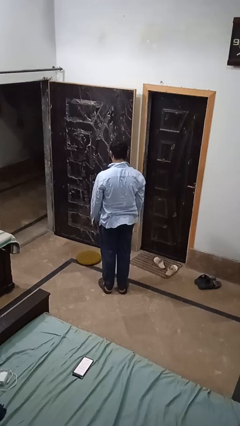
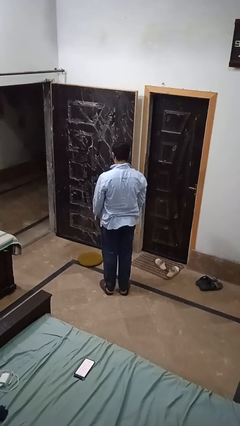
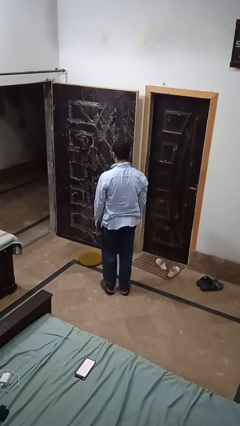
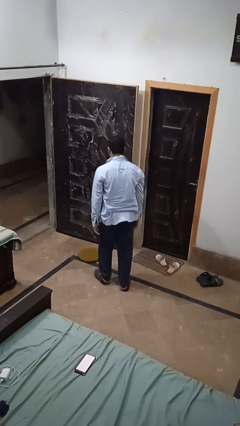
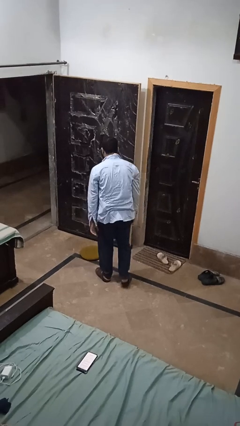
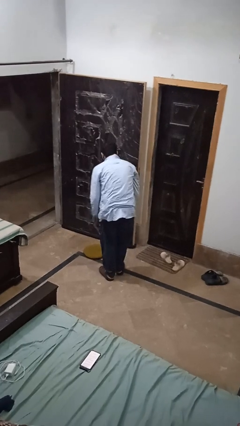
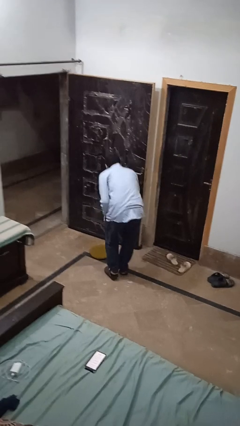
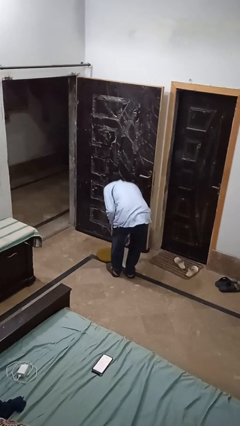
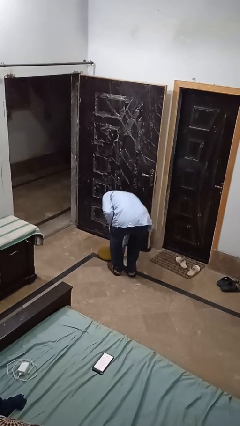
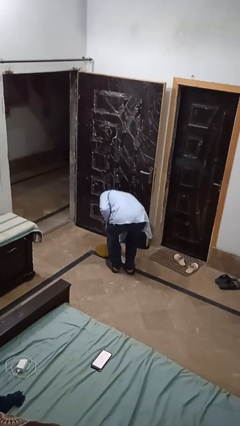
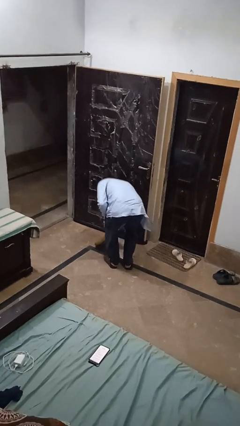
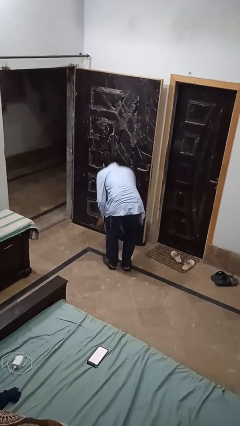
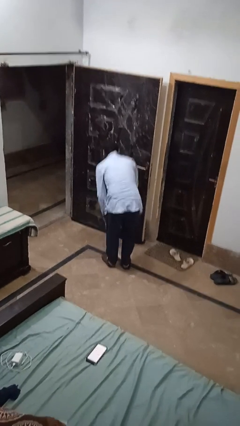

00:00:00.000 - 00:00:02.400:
person picks up object from floor

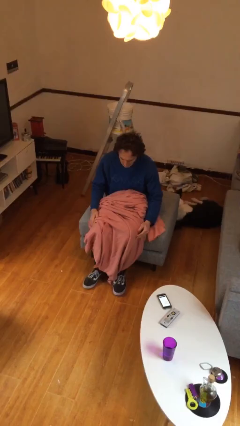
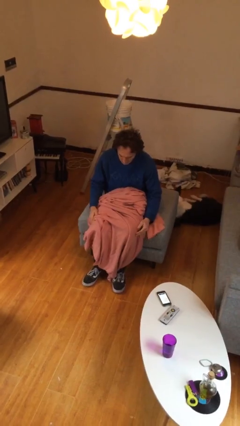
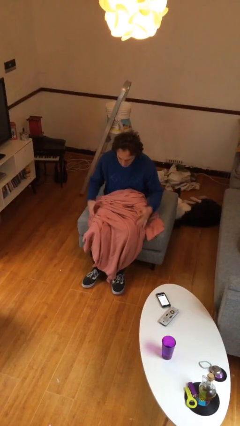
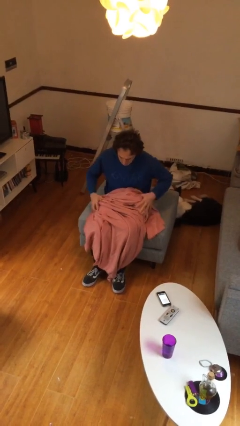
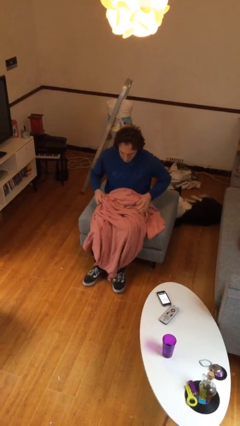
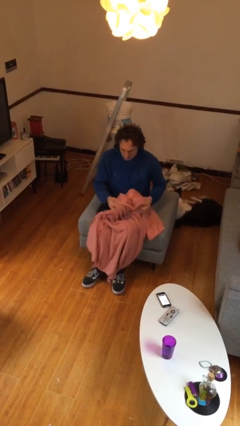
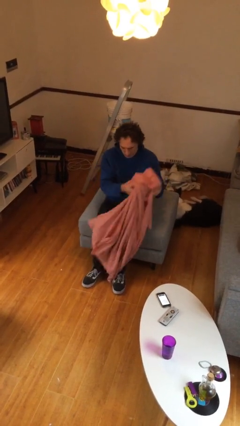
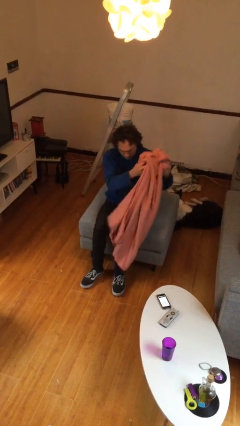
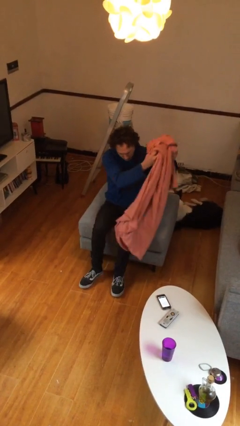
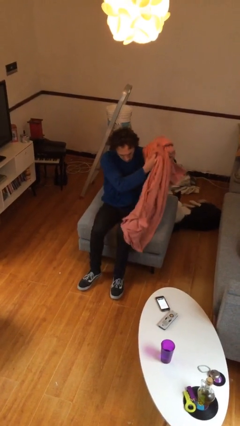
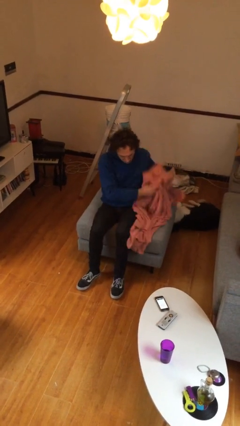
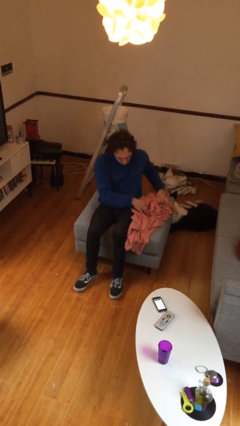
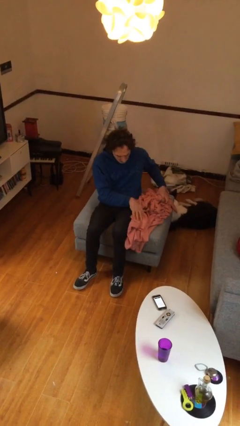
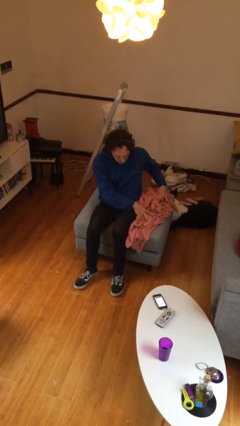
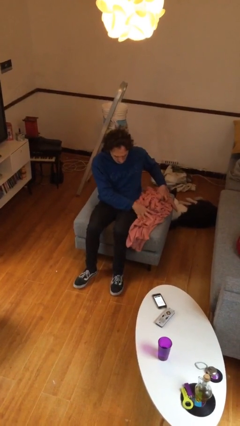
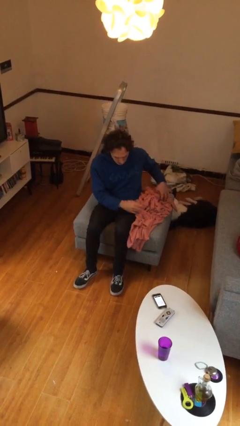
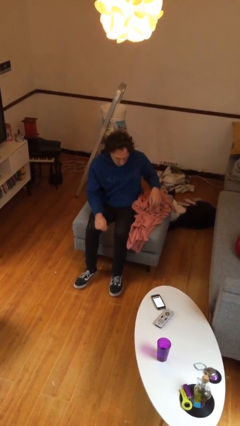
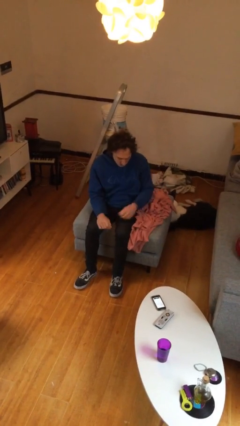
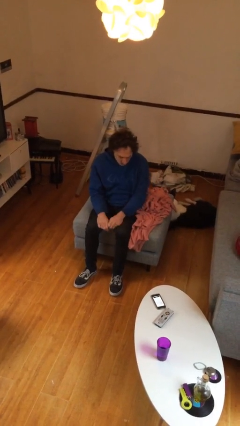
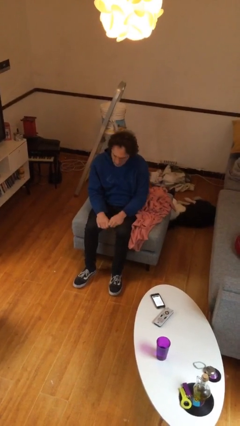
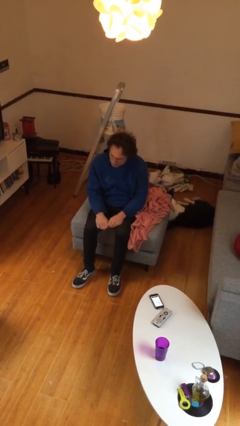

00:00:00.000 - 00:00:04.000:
person uncovers with blanket

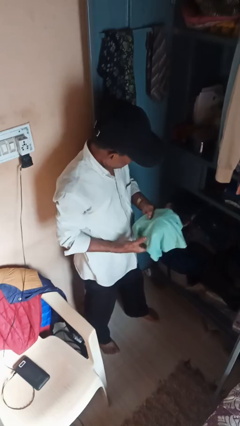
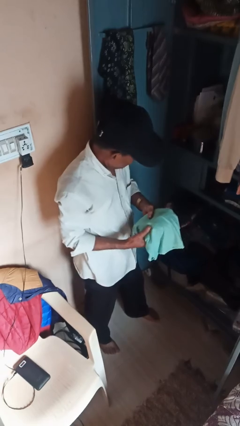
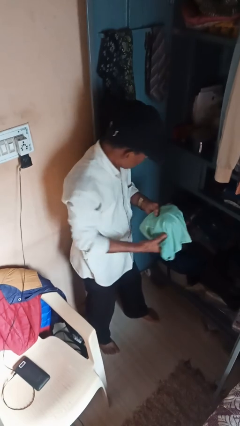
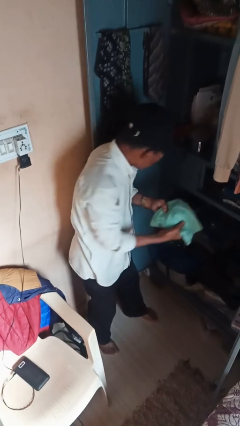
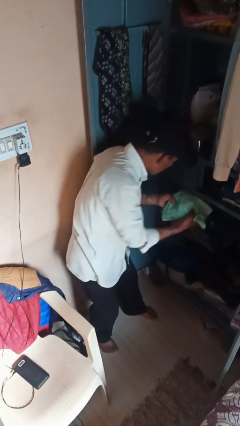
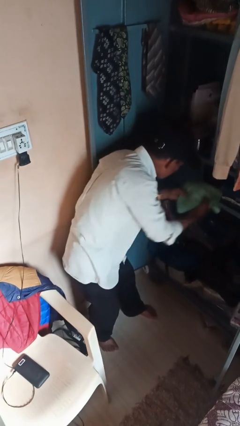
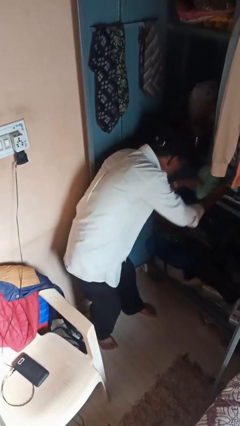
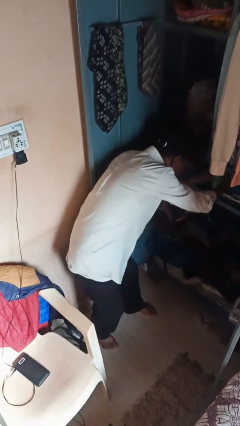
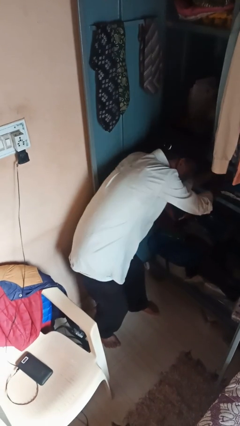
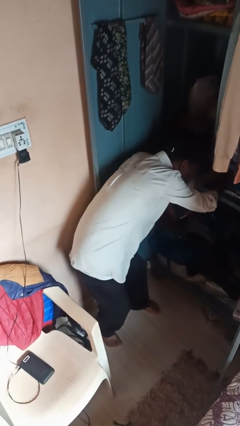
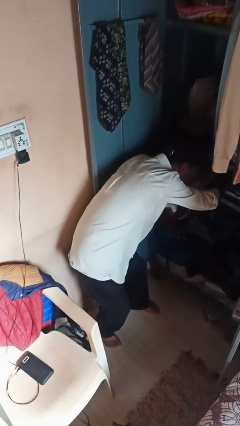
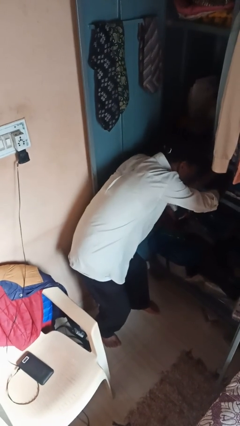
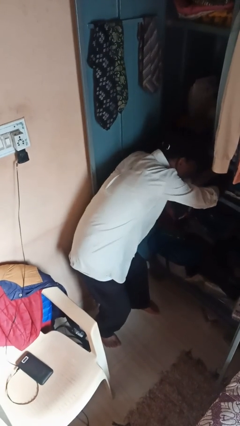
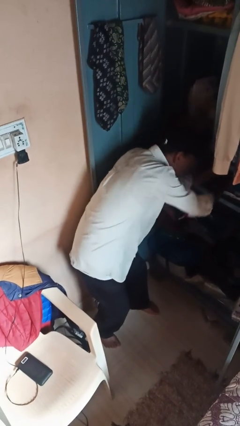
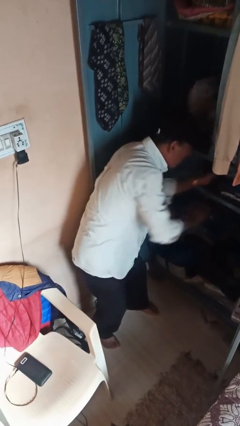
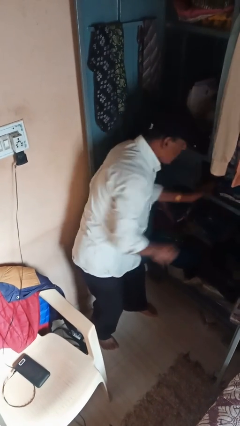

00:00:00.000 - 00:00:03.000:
person puts clothes into dresser

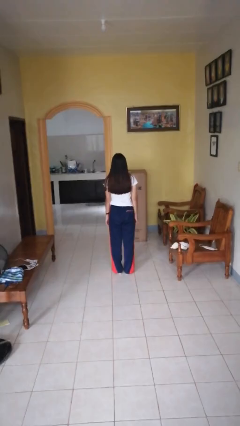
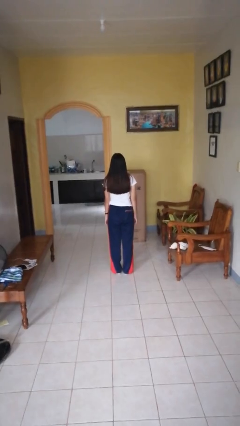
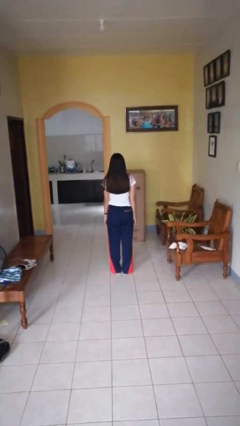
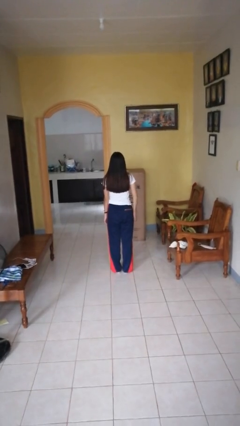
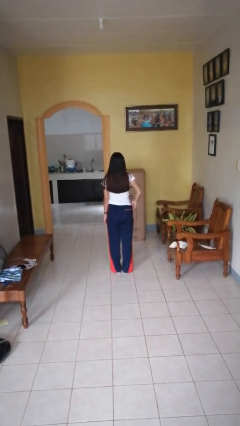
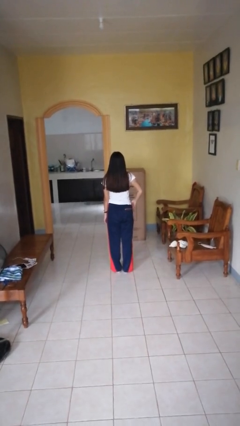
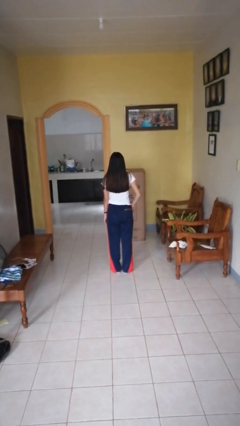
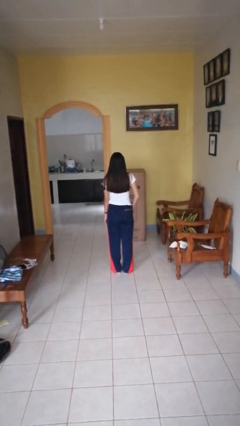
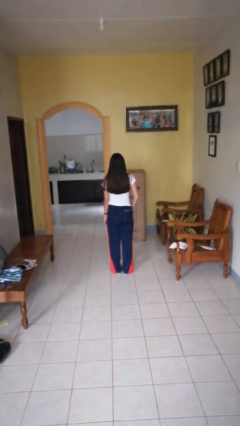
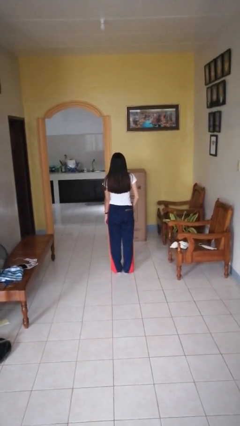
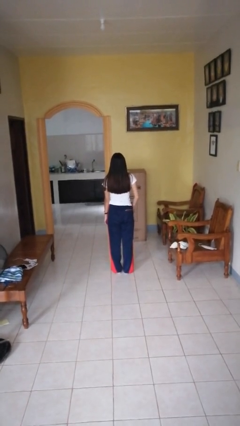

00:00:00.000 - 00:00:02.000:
person puts hands in back pockets

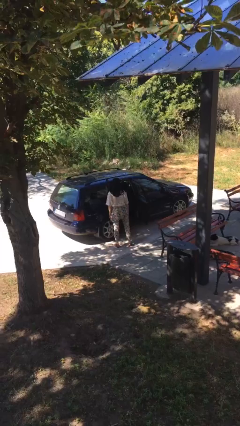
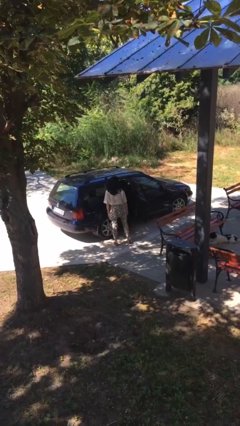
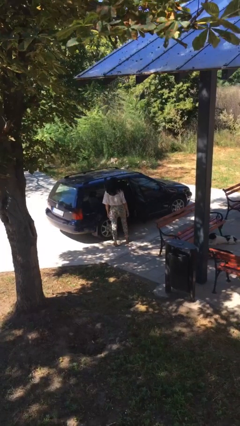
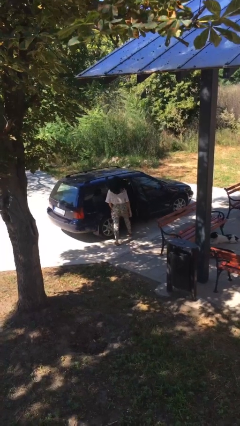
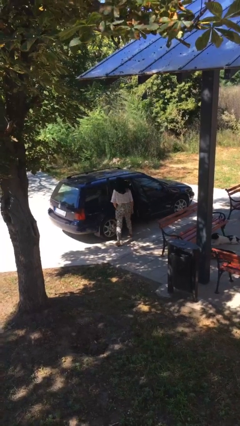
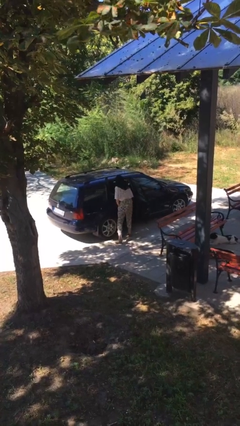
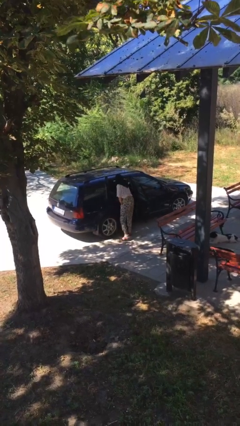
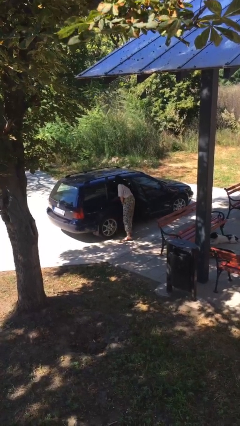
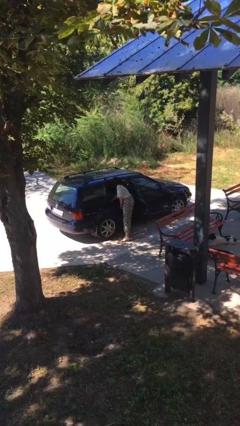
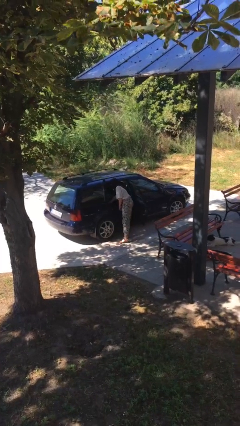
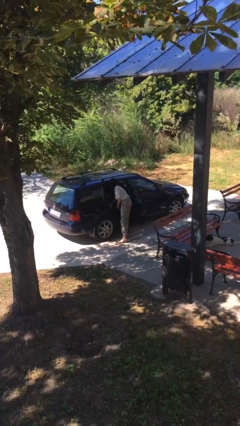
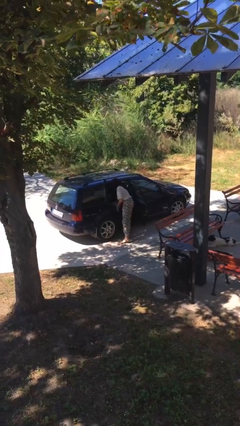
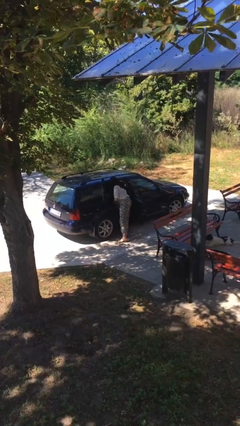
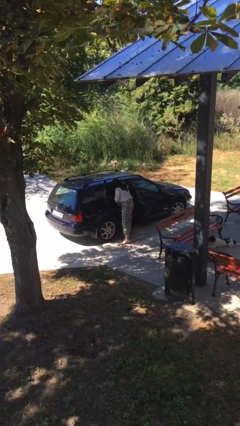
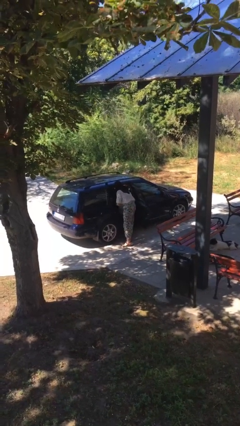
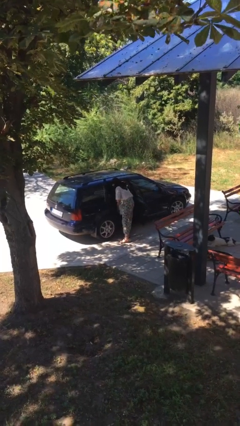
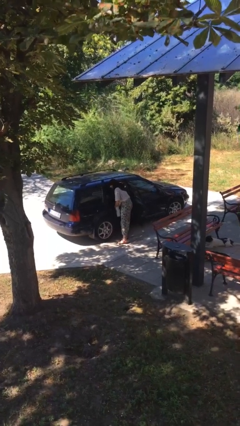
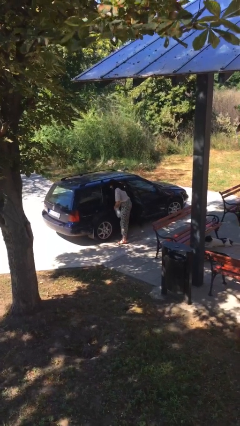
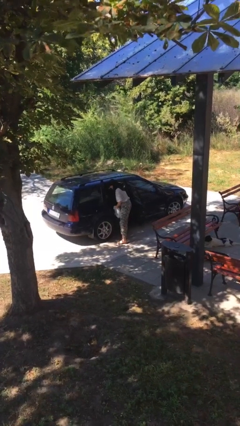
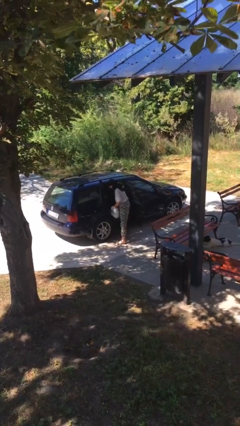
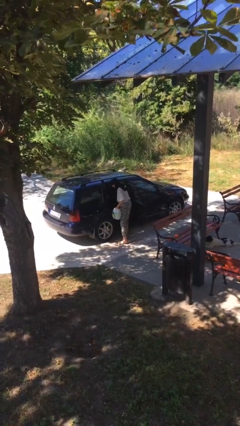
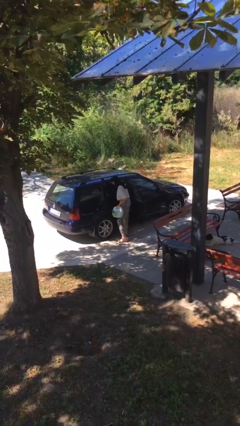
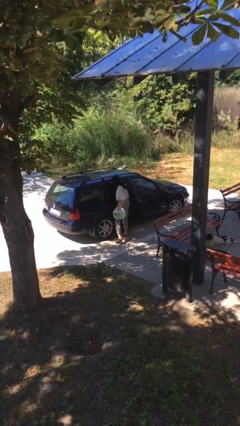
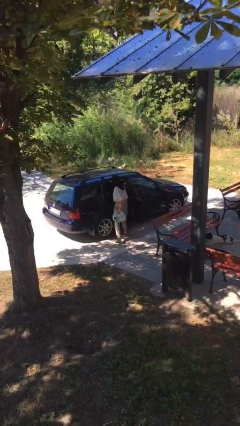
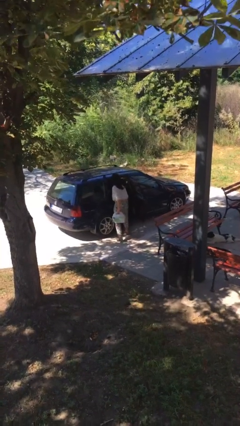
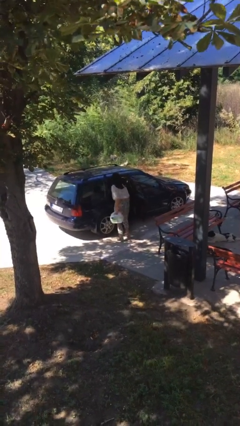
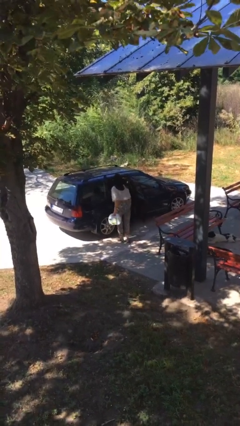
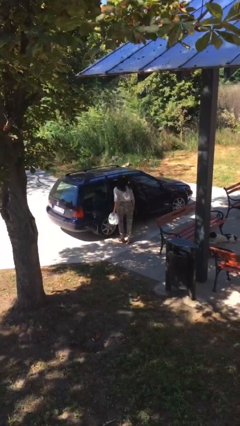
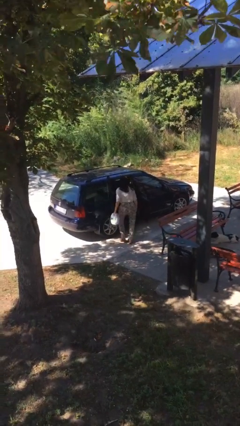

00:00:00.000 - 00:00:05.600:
person unloads car

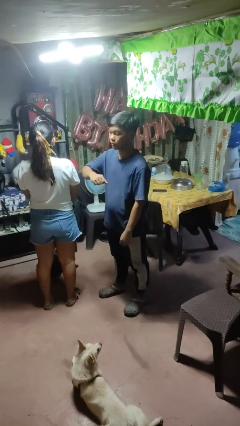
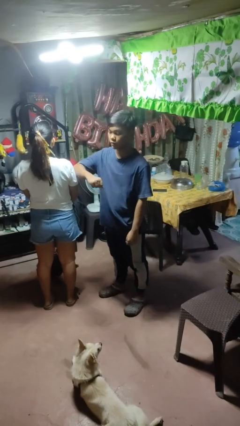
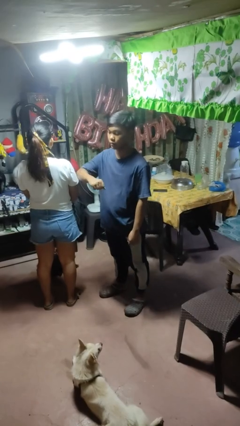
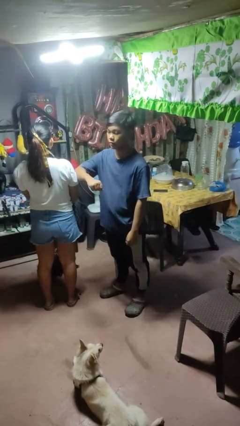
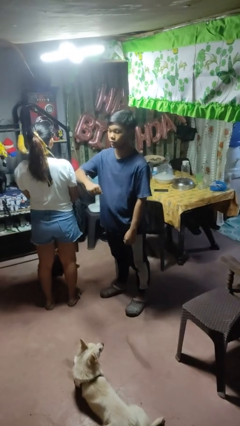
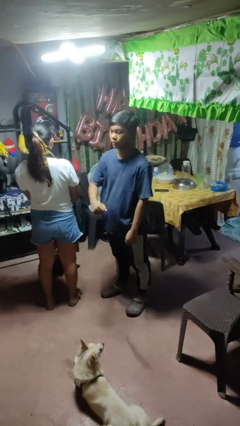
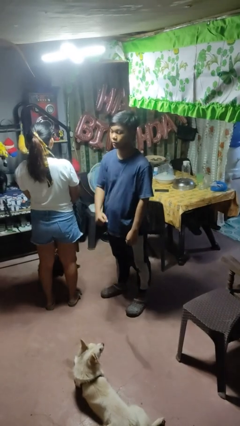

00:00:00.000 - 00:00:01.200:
person nudges person with elbow
